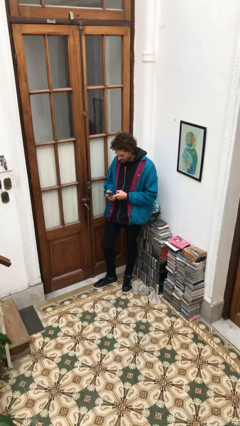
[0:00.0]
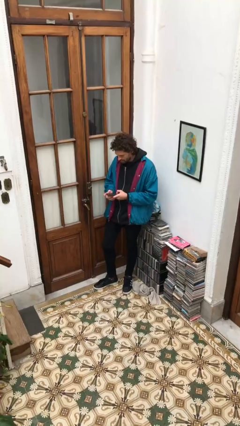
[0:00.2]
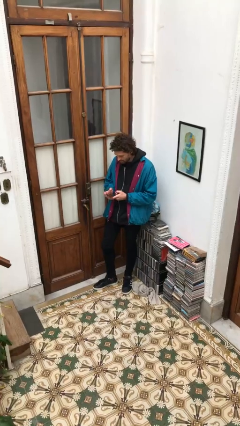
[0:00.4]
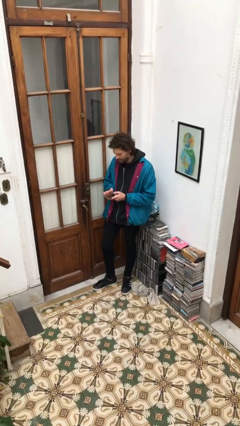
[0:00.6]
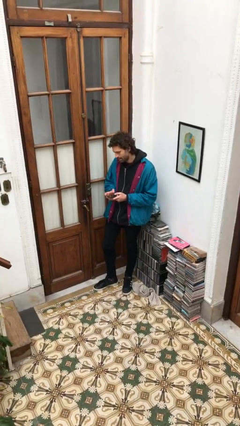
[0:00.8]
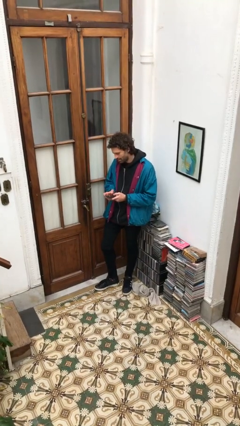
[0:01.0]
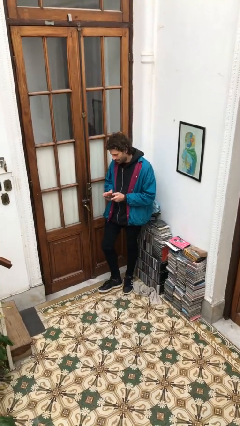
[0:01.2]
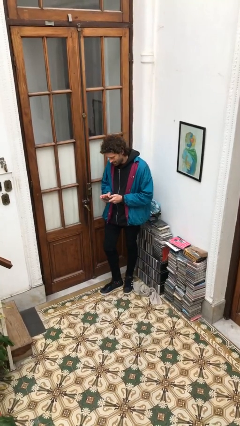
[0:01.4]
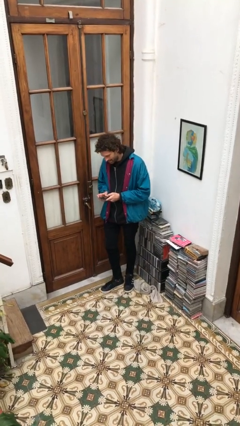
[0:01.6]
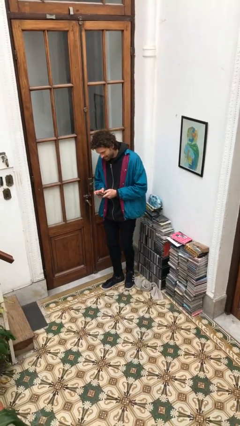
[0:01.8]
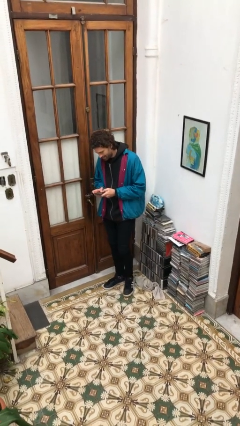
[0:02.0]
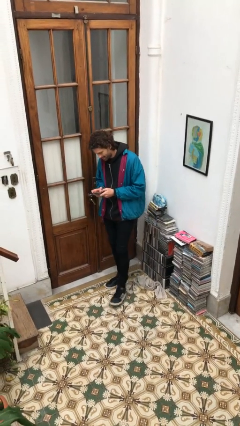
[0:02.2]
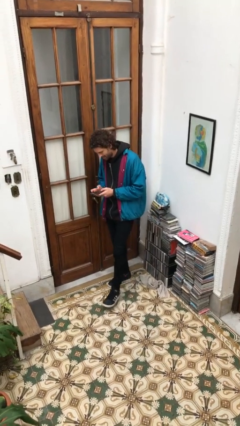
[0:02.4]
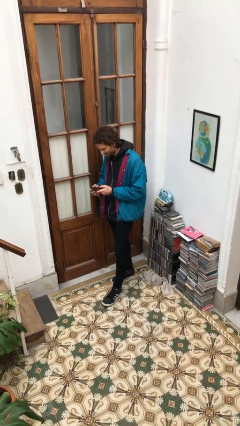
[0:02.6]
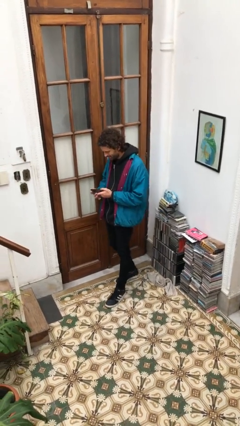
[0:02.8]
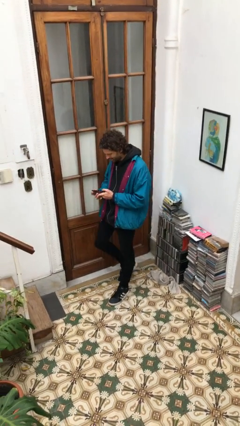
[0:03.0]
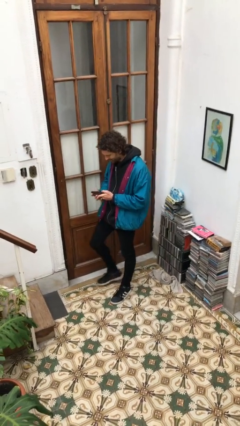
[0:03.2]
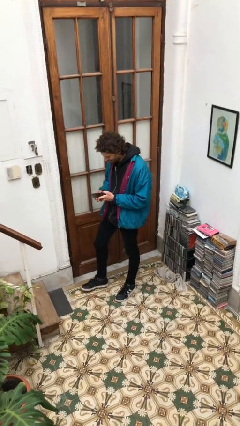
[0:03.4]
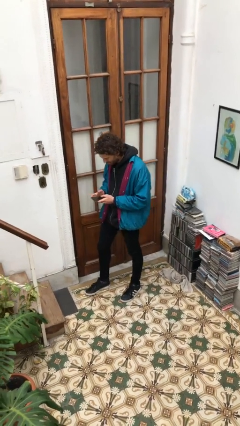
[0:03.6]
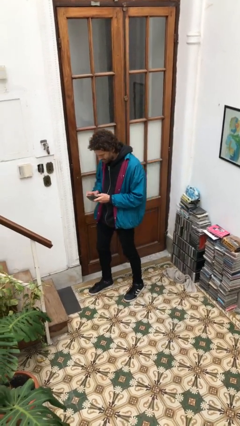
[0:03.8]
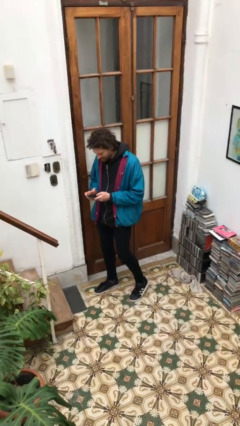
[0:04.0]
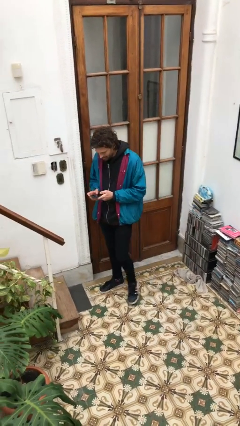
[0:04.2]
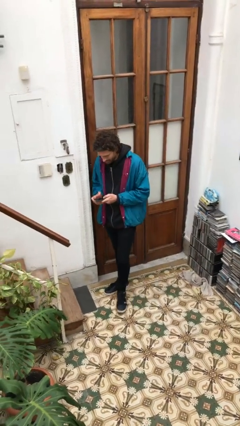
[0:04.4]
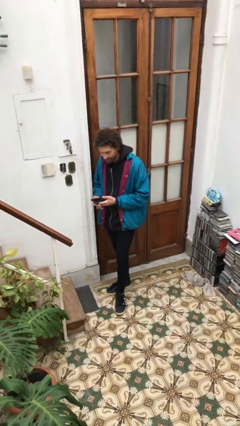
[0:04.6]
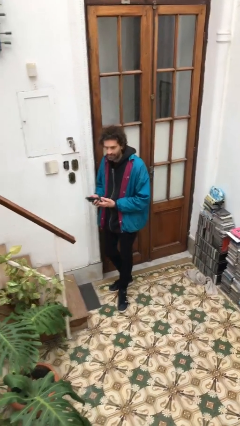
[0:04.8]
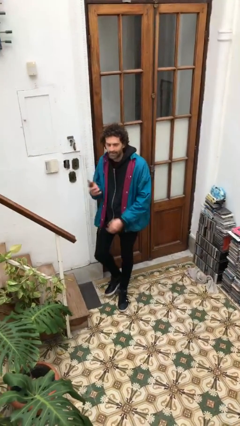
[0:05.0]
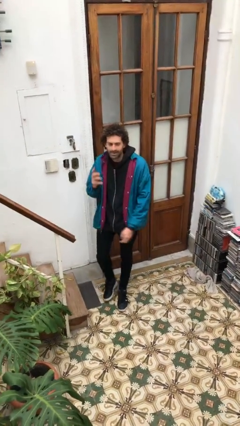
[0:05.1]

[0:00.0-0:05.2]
person texts on phone

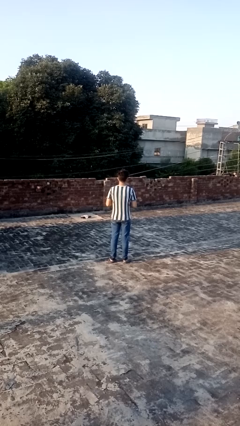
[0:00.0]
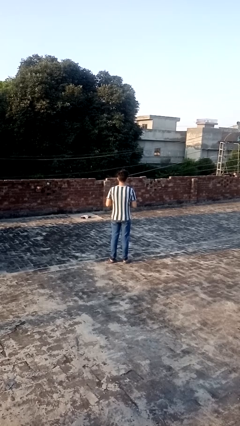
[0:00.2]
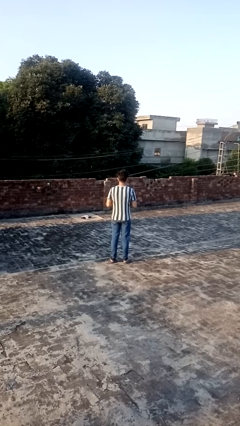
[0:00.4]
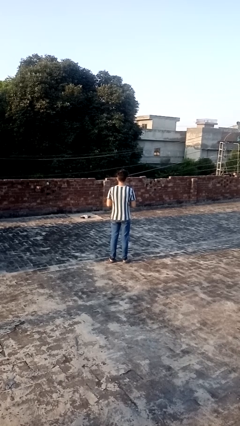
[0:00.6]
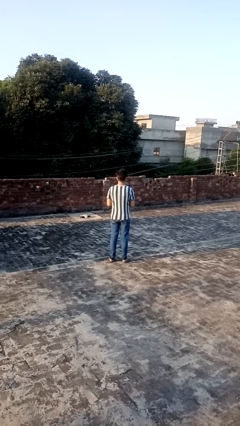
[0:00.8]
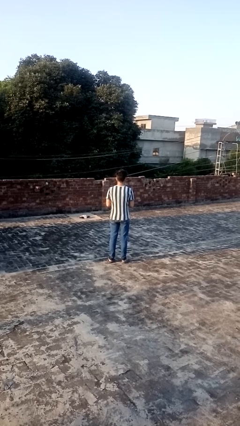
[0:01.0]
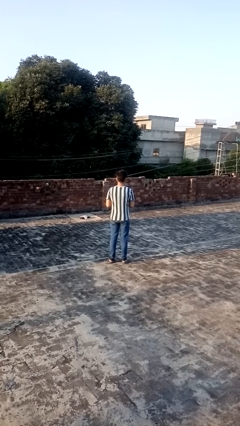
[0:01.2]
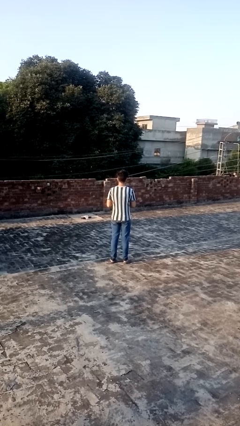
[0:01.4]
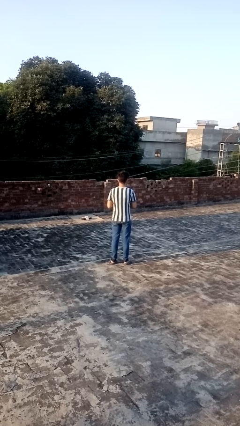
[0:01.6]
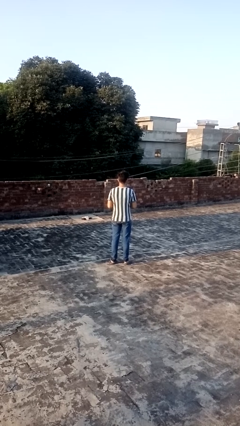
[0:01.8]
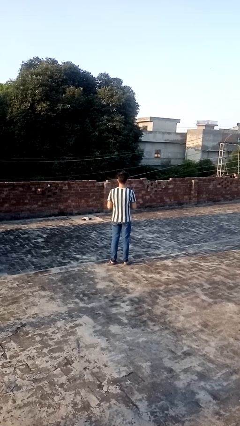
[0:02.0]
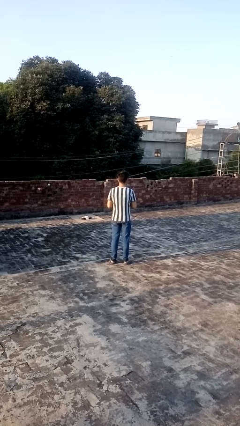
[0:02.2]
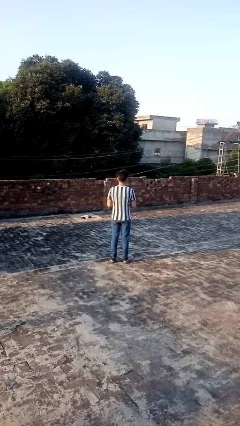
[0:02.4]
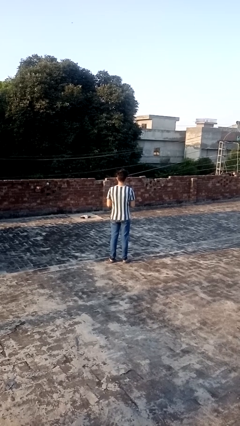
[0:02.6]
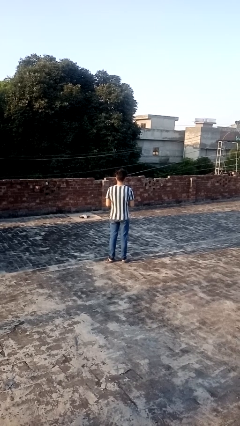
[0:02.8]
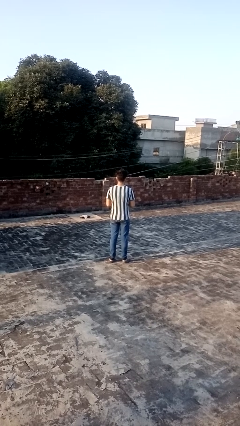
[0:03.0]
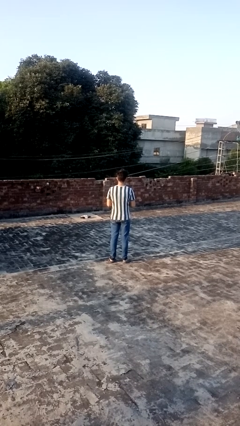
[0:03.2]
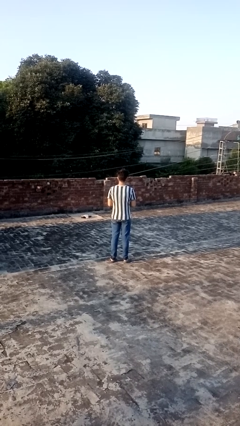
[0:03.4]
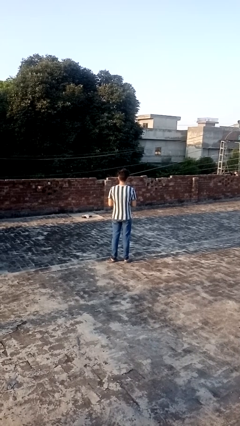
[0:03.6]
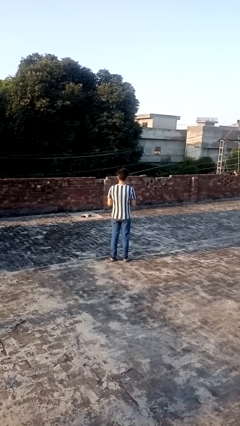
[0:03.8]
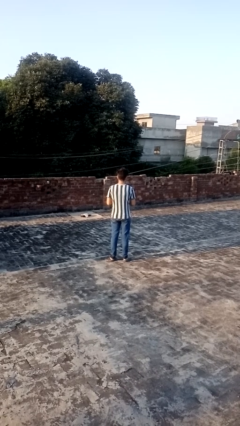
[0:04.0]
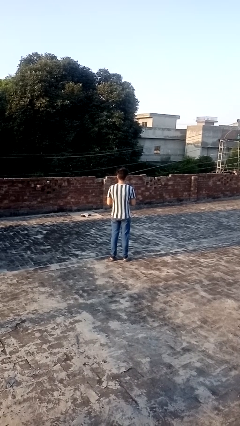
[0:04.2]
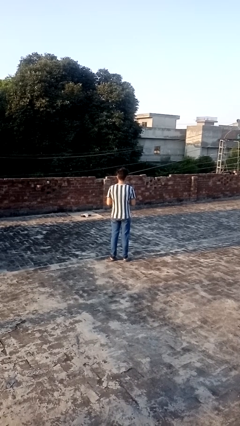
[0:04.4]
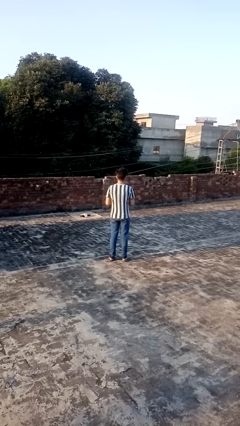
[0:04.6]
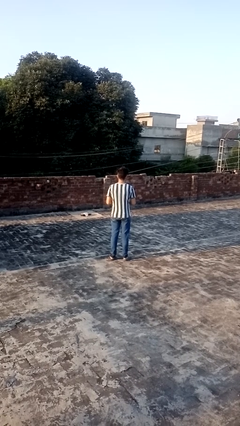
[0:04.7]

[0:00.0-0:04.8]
person cracks knuckles

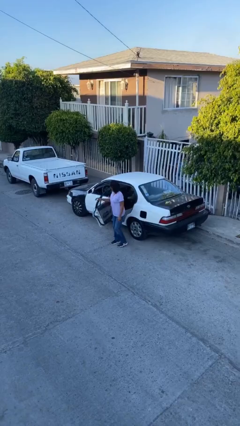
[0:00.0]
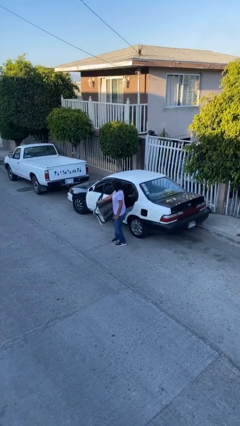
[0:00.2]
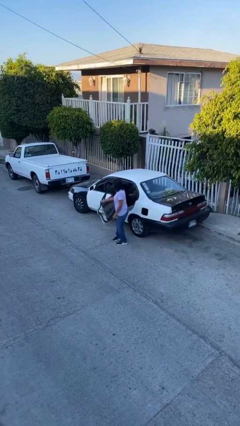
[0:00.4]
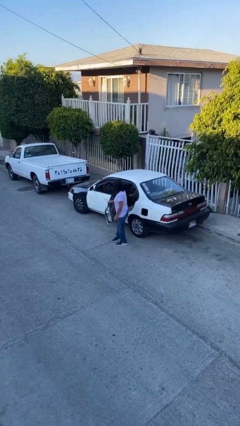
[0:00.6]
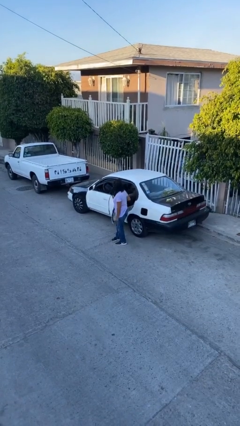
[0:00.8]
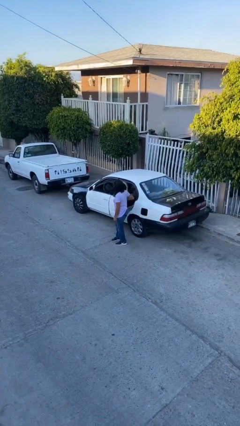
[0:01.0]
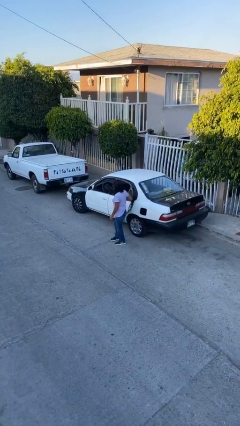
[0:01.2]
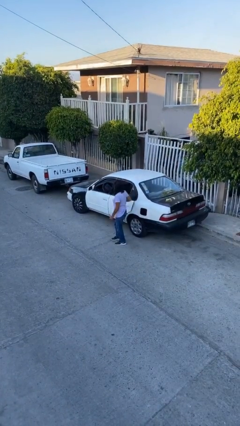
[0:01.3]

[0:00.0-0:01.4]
person closes car door

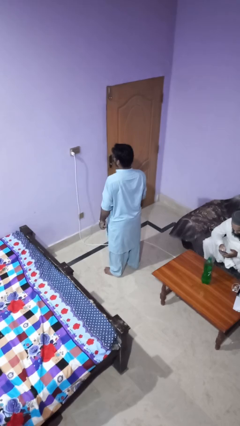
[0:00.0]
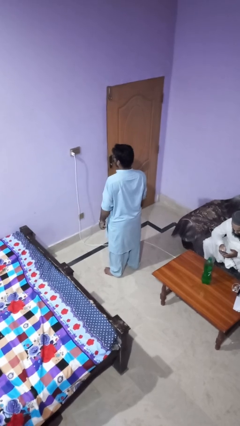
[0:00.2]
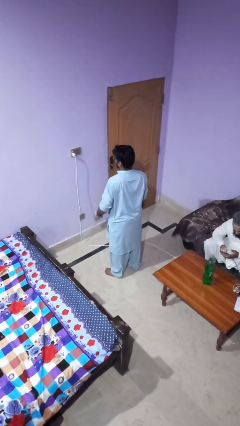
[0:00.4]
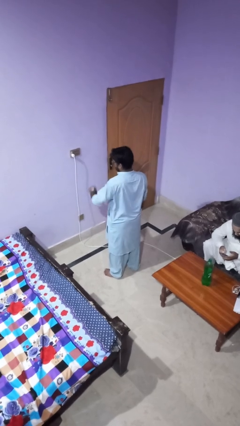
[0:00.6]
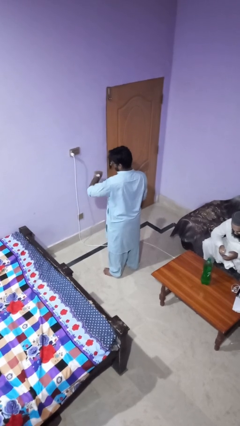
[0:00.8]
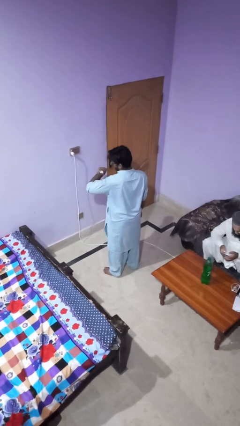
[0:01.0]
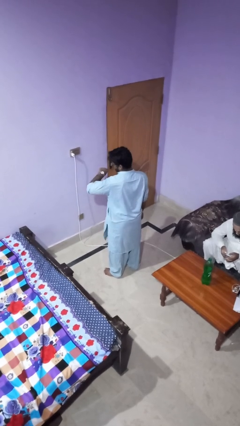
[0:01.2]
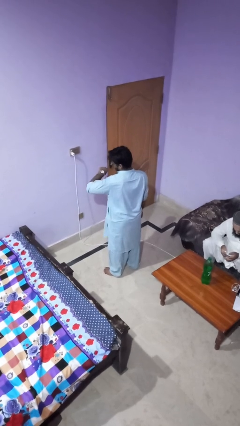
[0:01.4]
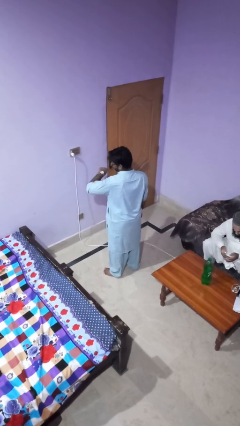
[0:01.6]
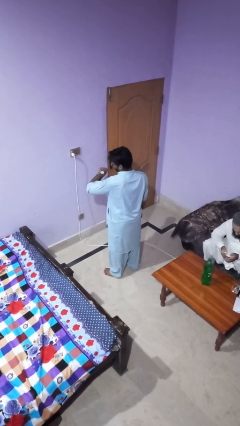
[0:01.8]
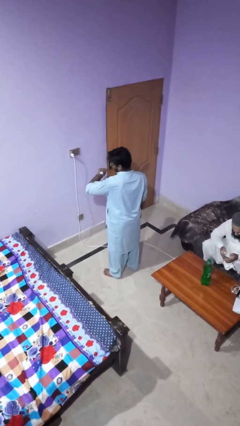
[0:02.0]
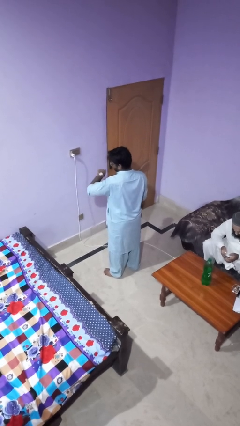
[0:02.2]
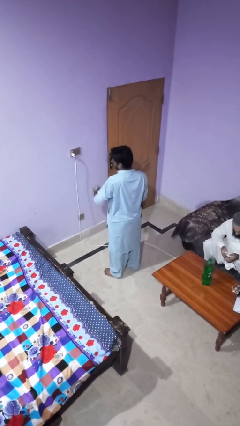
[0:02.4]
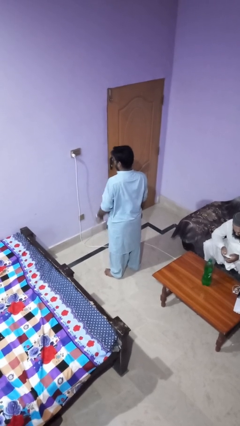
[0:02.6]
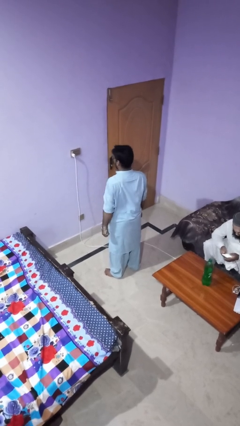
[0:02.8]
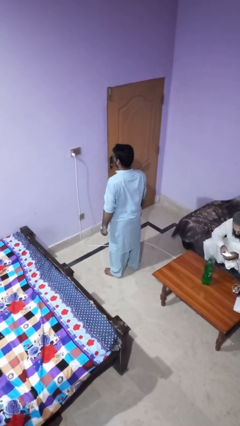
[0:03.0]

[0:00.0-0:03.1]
person looks at wristwatch

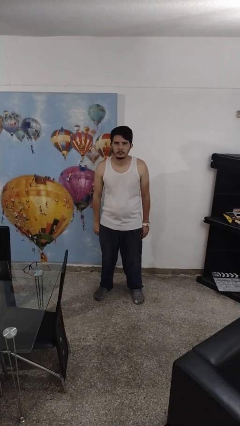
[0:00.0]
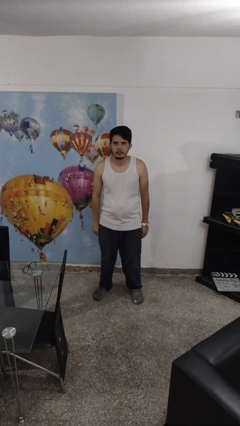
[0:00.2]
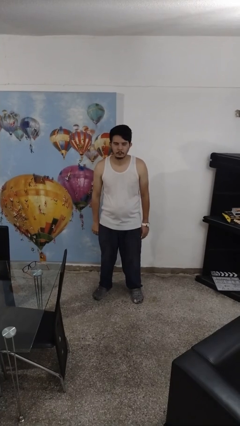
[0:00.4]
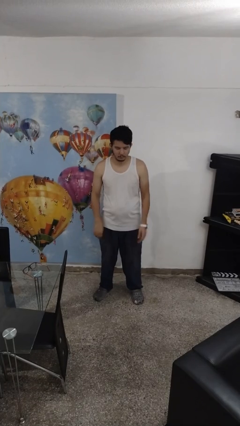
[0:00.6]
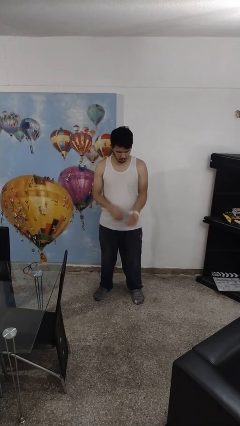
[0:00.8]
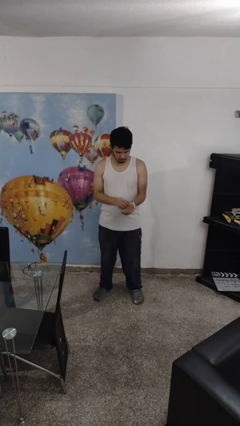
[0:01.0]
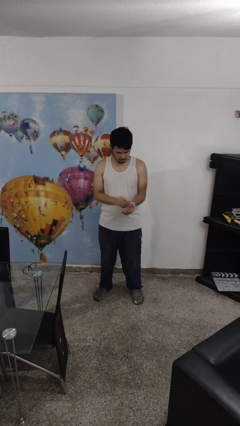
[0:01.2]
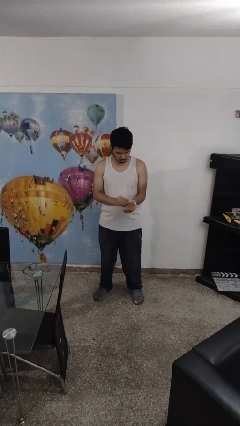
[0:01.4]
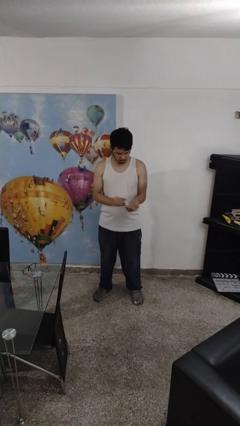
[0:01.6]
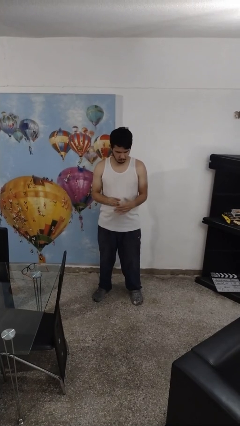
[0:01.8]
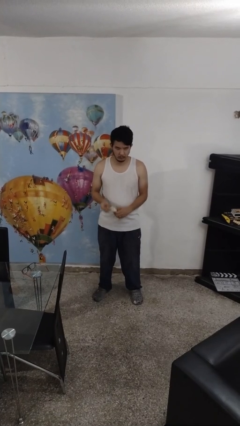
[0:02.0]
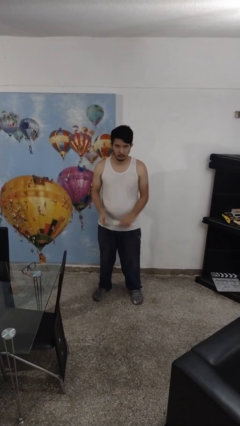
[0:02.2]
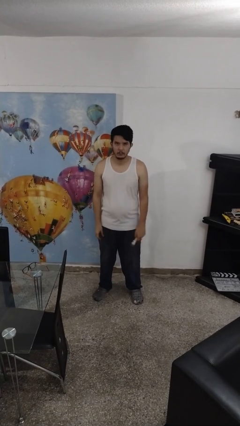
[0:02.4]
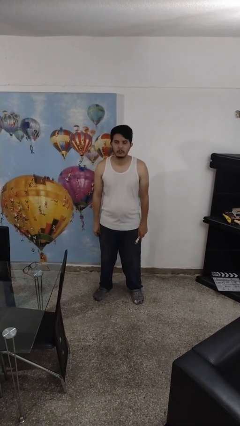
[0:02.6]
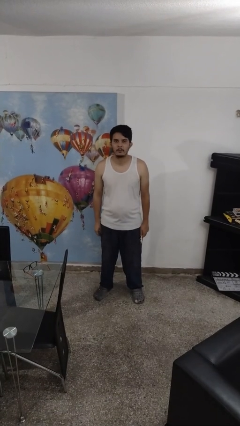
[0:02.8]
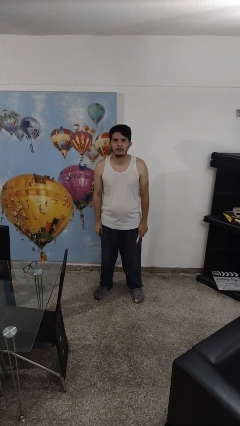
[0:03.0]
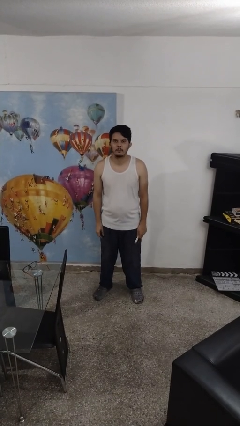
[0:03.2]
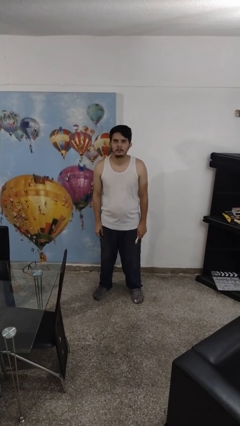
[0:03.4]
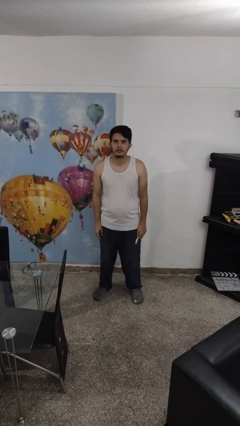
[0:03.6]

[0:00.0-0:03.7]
person takes off wristwatch
